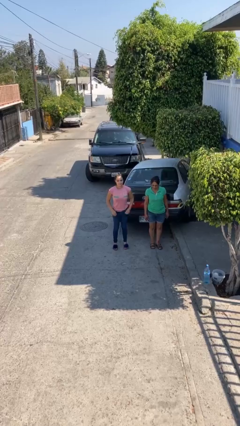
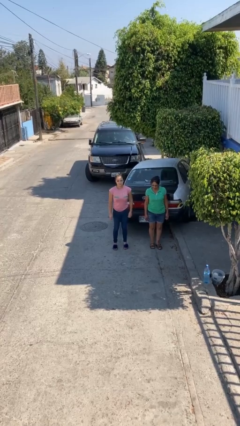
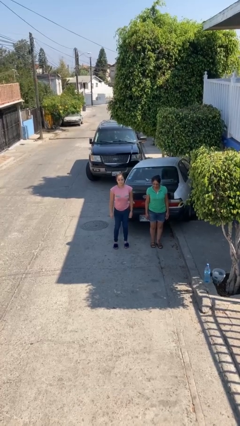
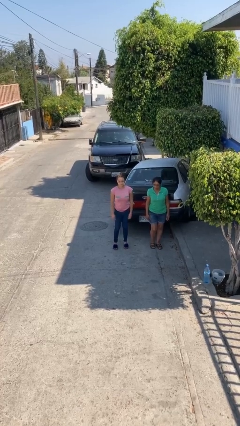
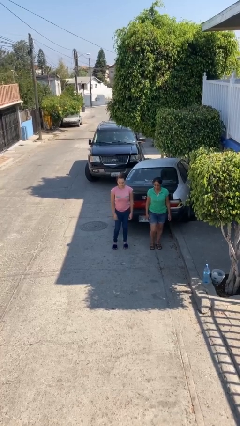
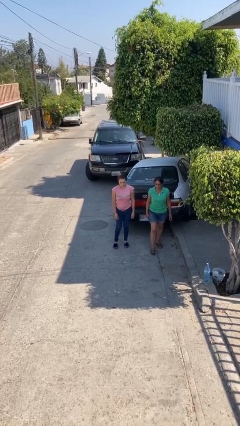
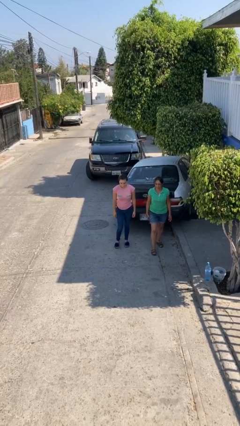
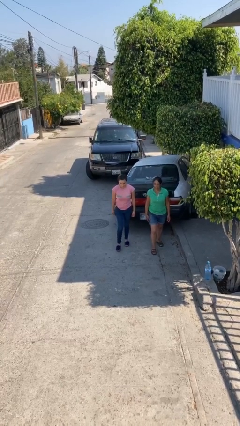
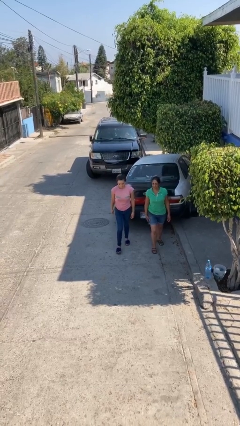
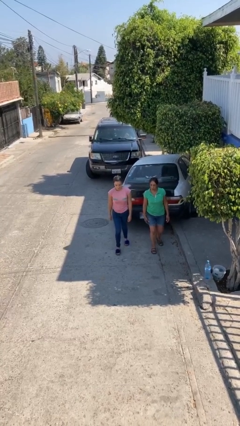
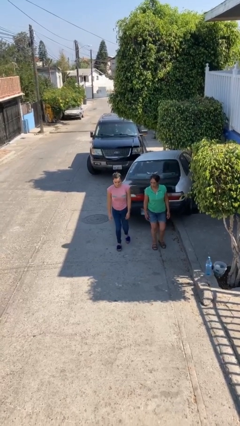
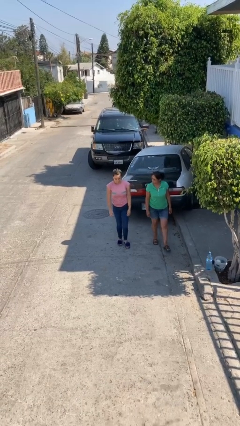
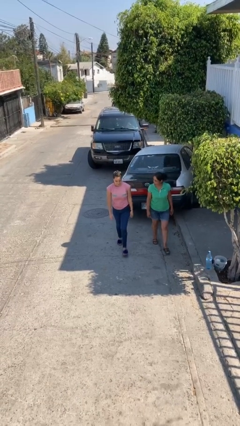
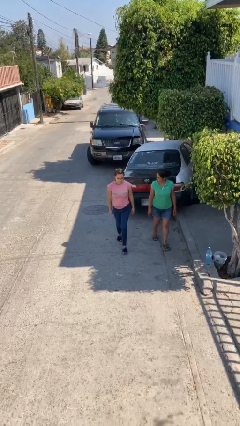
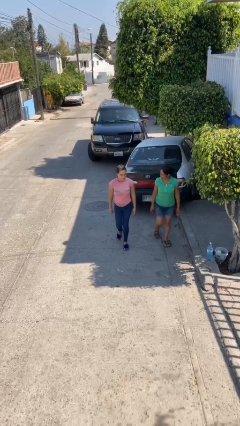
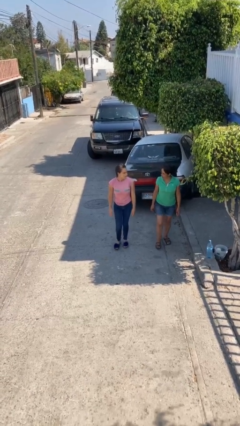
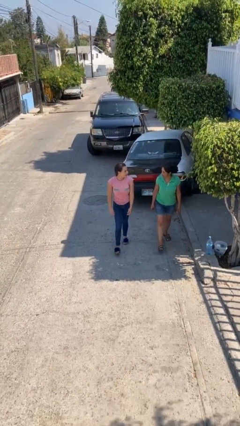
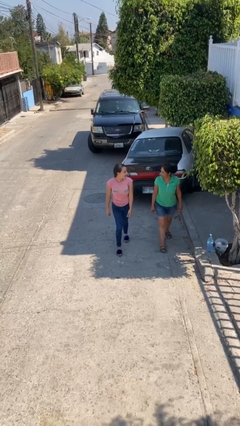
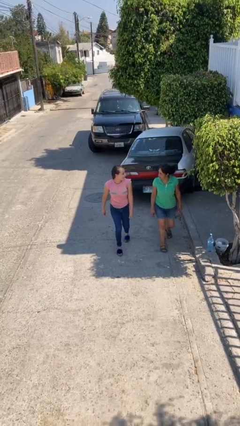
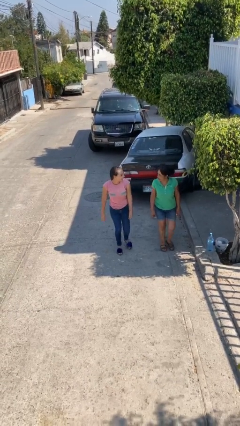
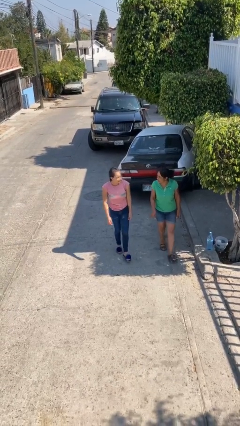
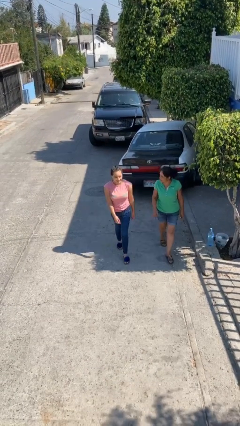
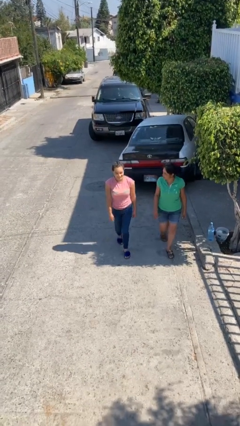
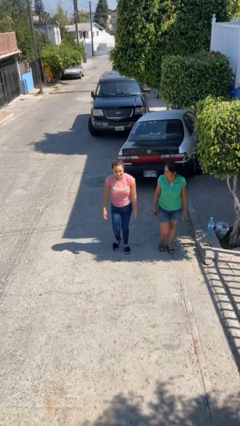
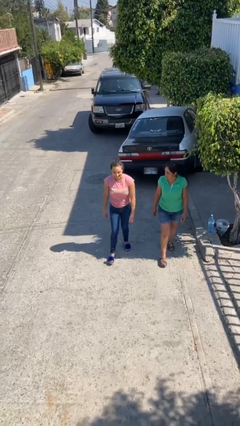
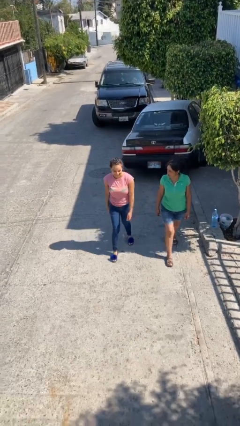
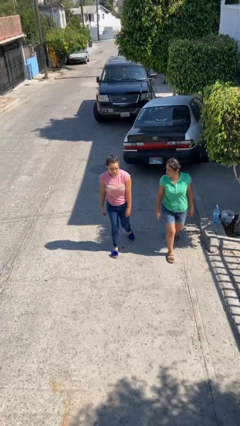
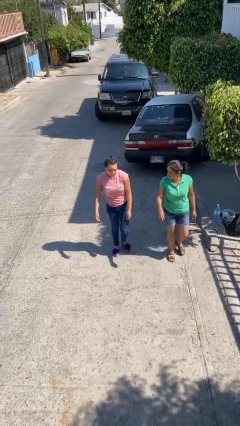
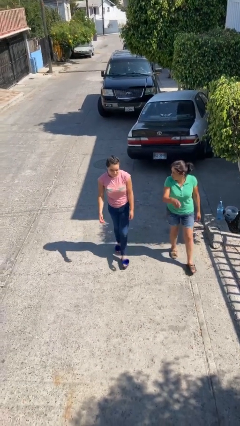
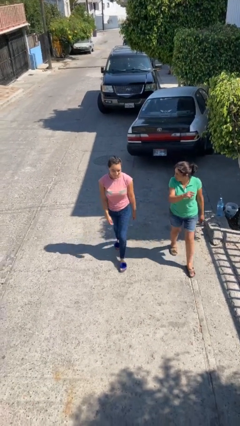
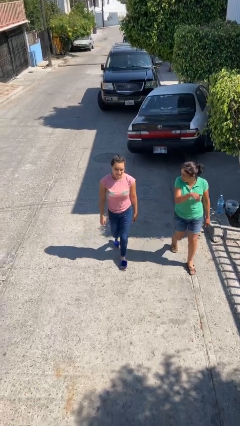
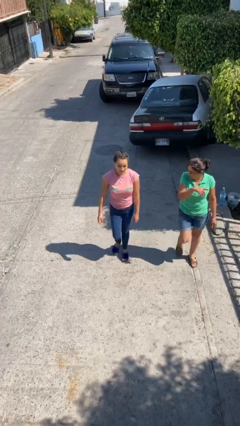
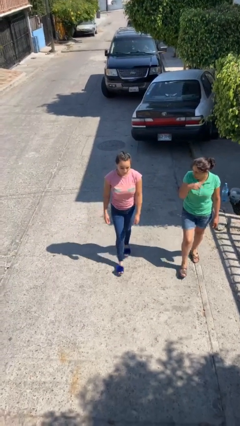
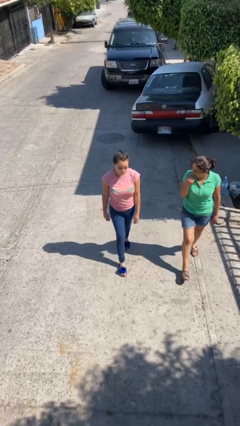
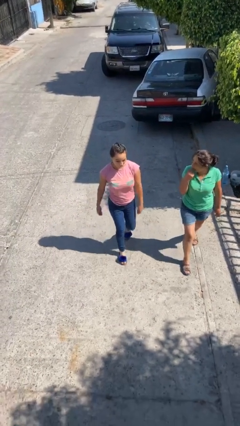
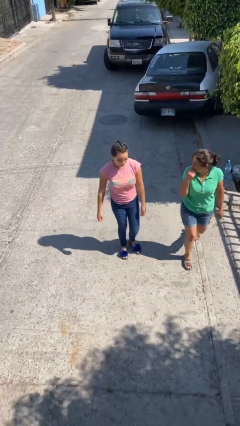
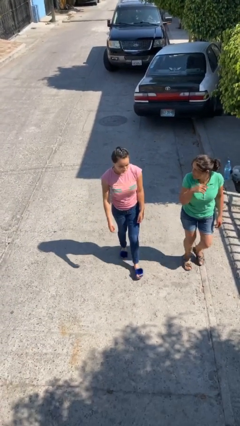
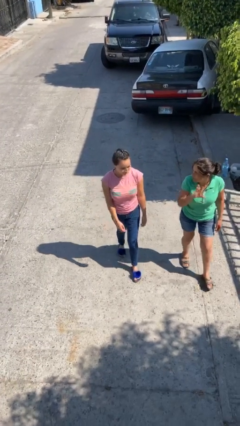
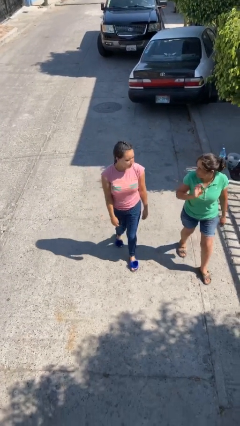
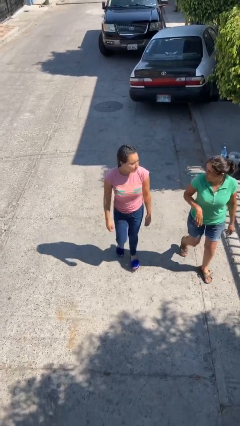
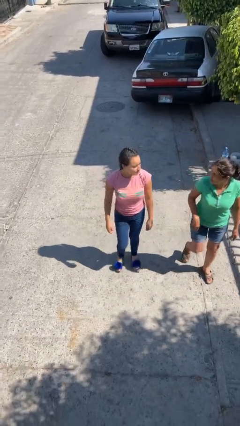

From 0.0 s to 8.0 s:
person talks to person

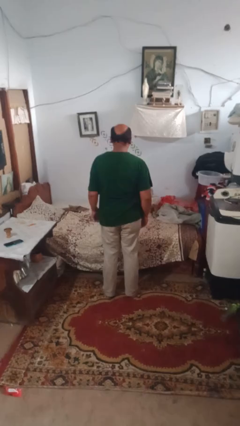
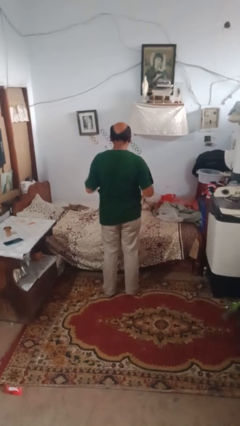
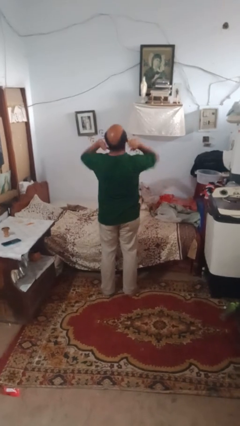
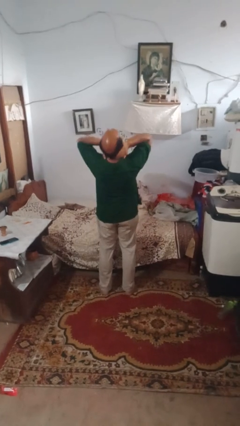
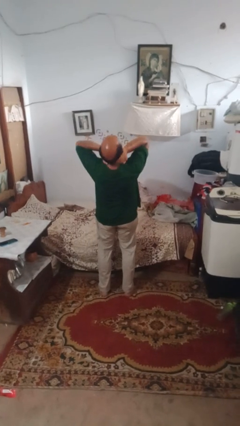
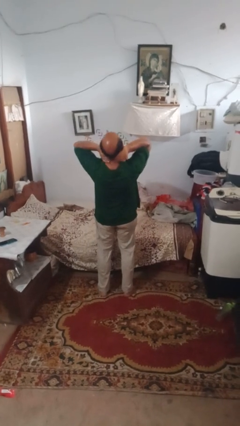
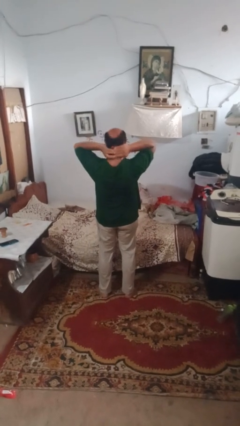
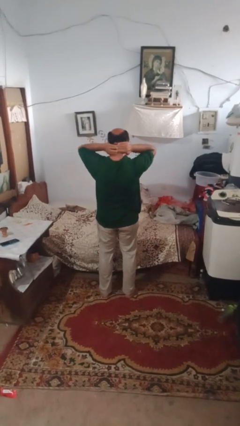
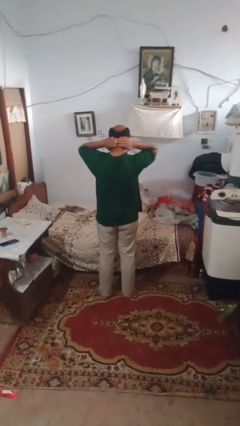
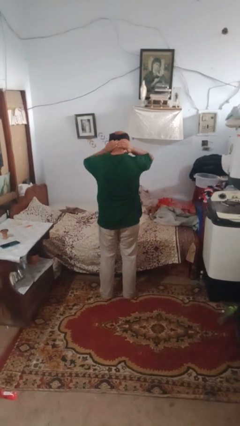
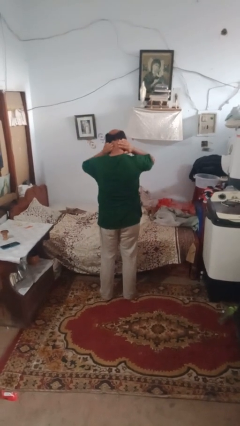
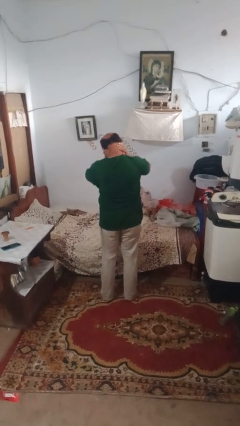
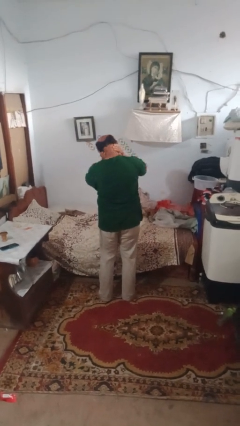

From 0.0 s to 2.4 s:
person rubs neck

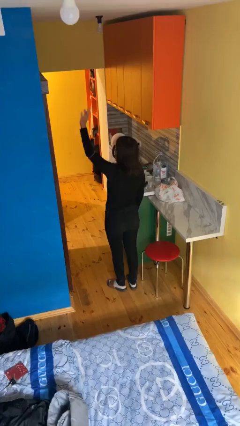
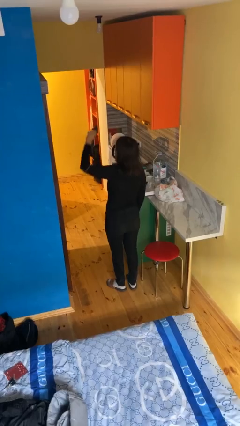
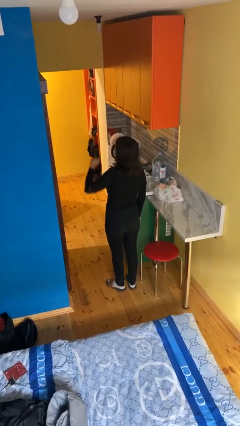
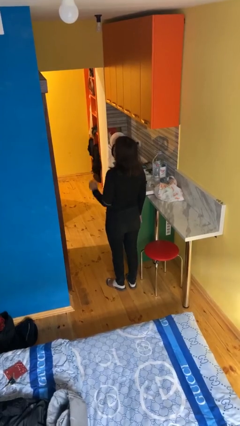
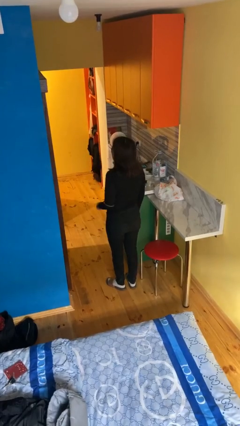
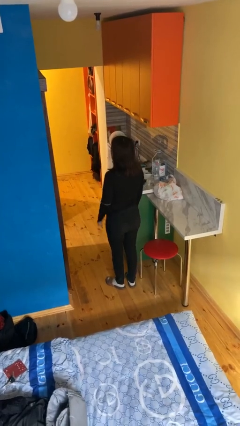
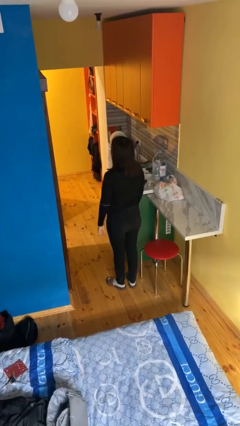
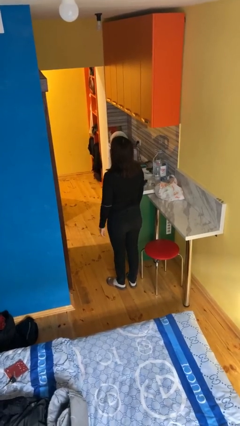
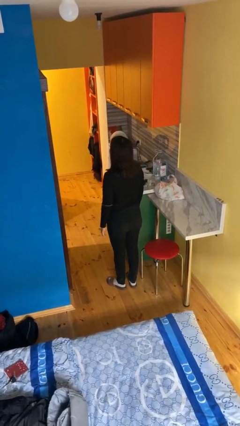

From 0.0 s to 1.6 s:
person gestures lower hand

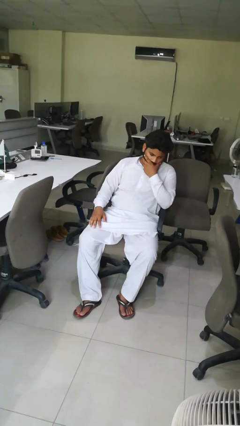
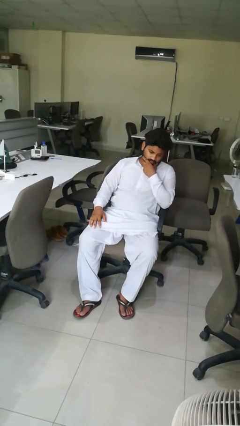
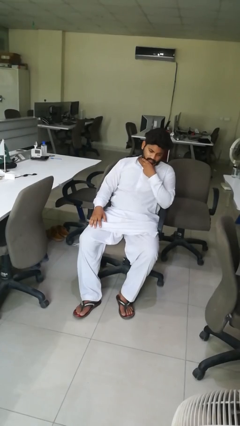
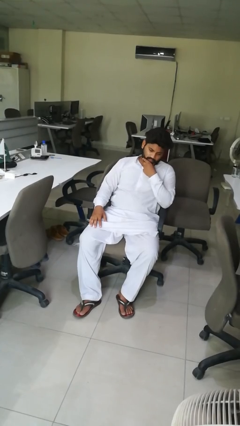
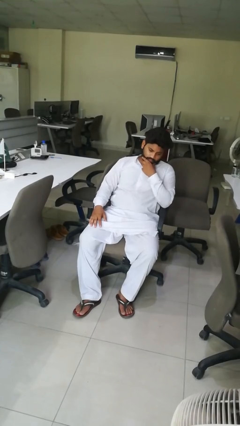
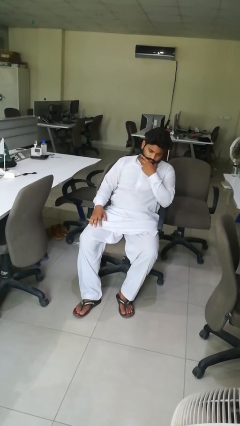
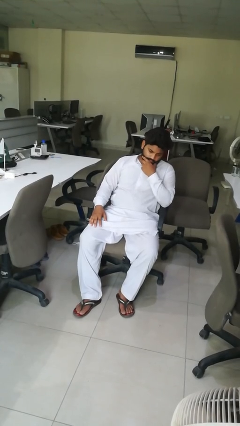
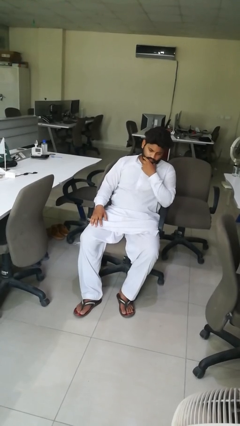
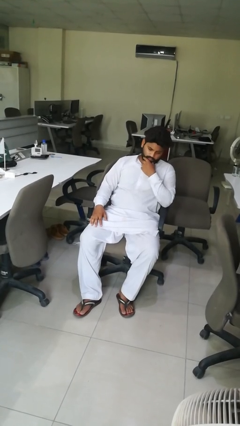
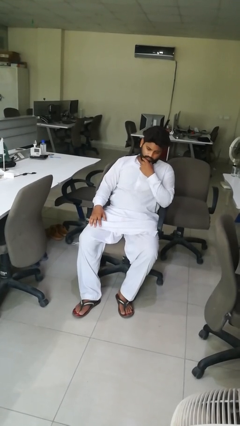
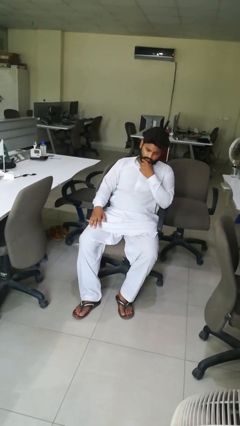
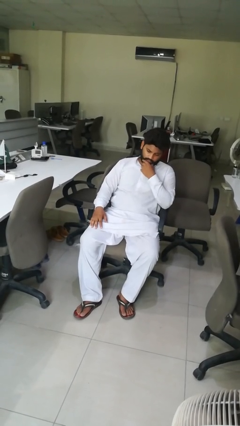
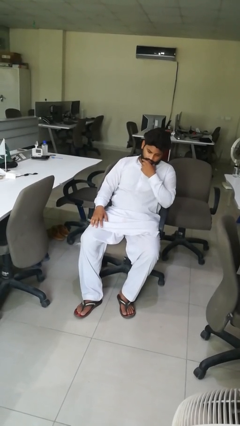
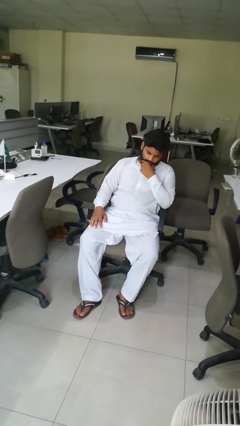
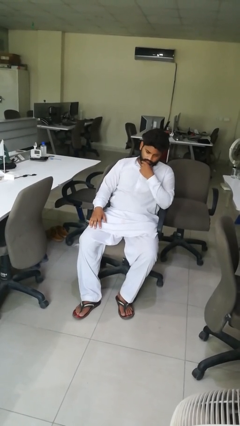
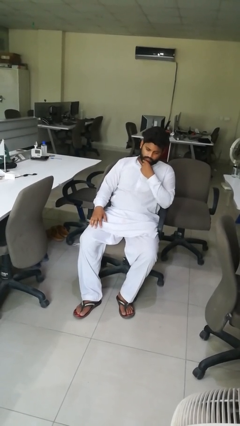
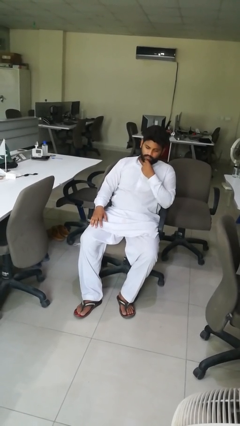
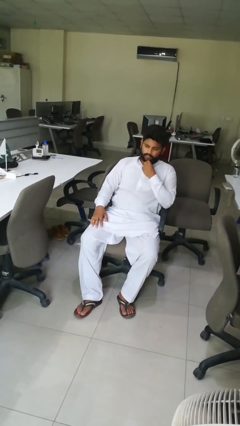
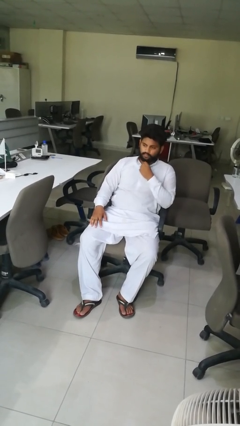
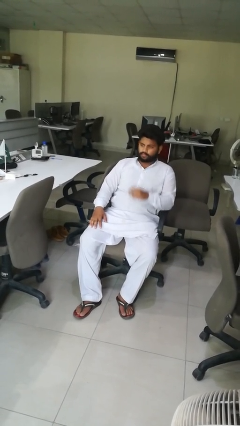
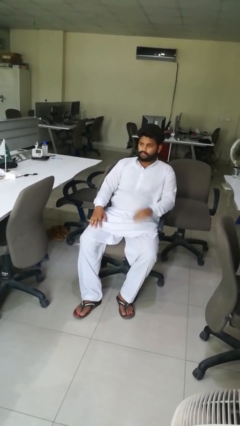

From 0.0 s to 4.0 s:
person strokes chin

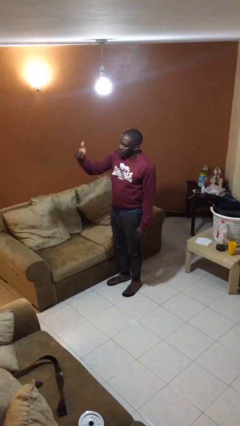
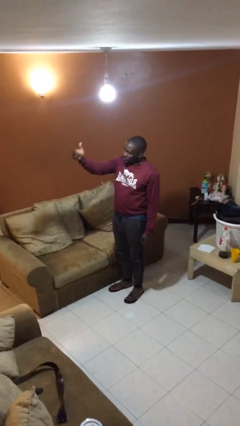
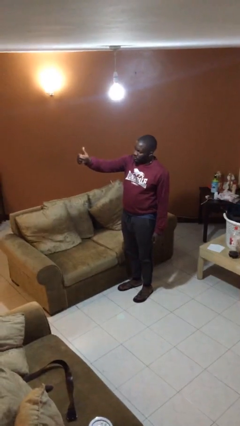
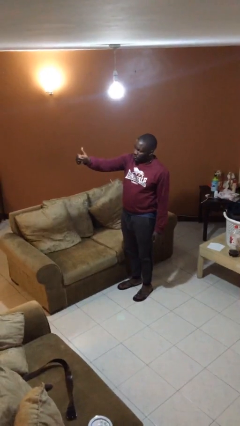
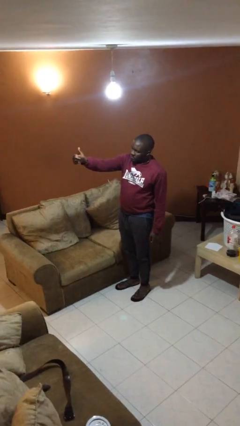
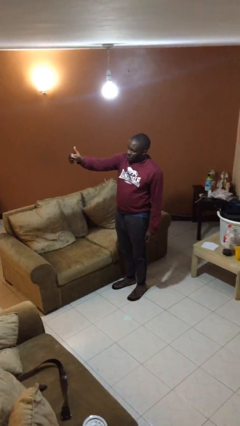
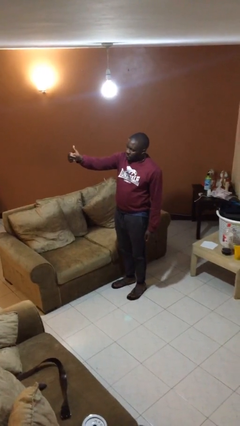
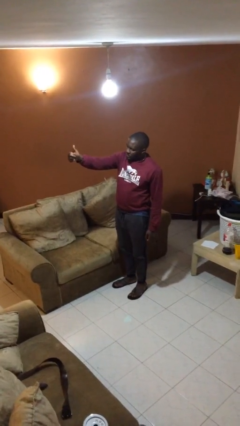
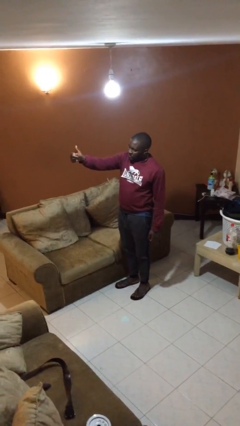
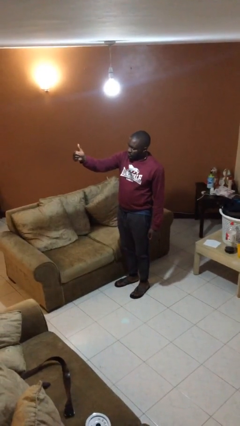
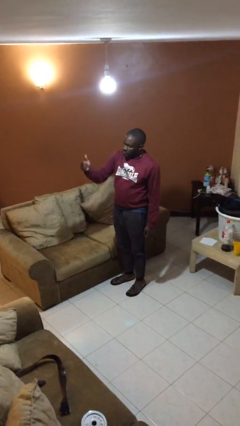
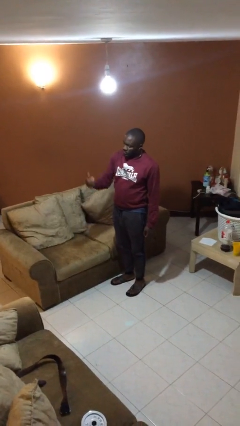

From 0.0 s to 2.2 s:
person gestures thumbs up
